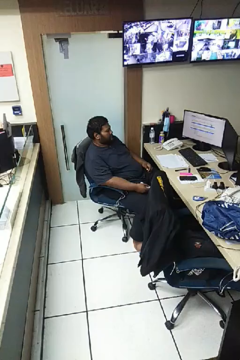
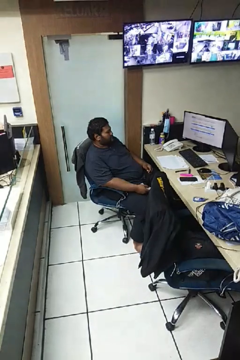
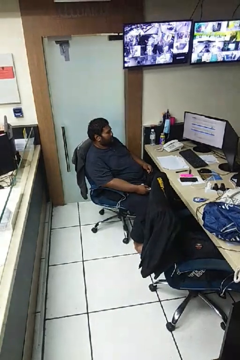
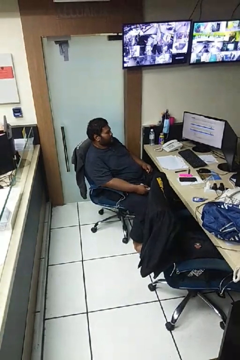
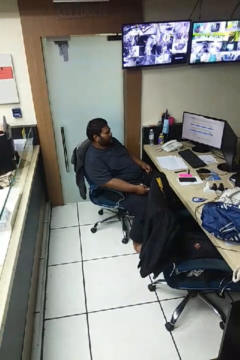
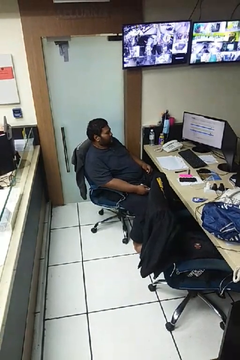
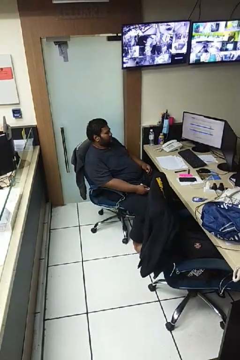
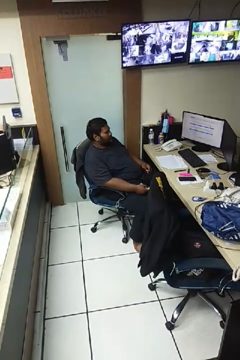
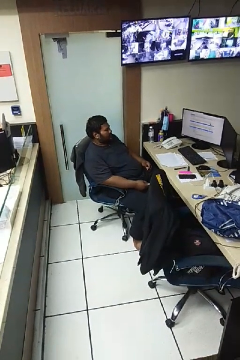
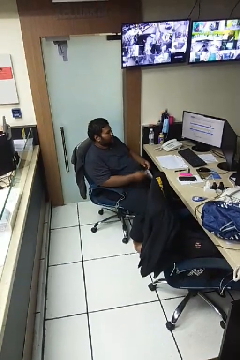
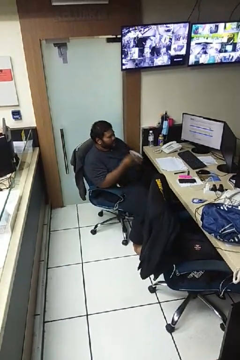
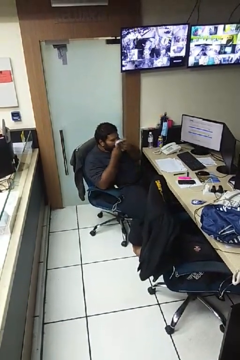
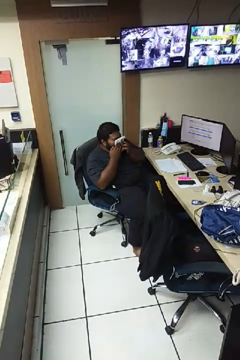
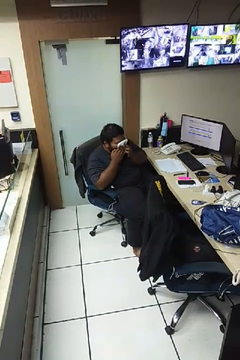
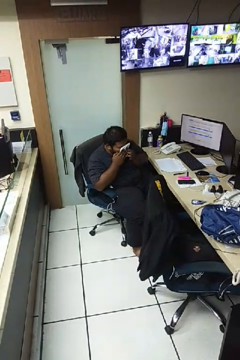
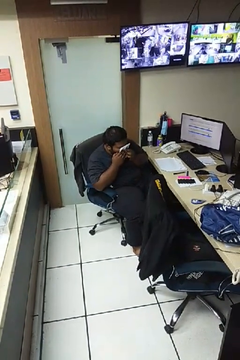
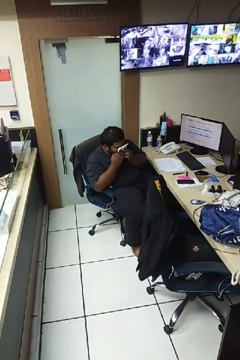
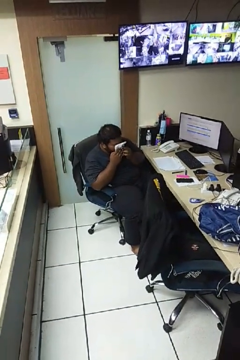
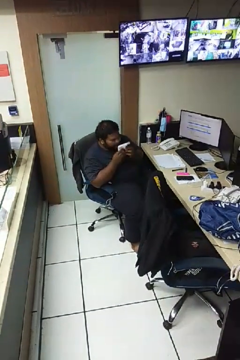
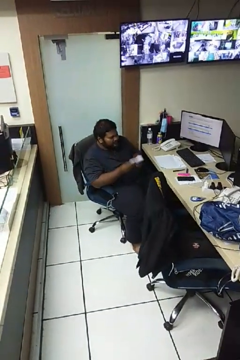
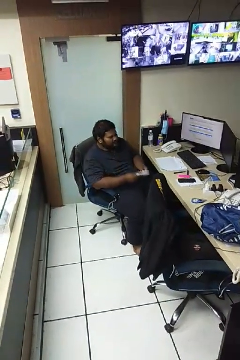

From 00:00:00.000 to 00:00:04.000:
person blows nose

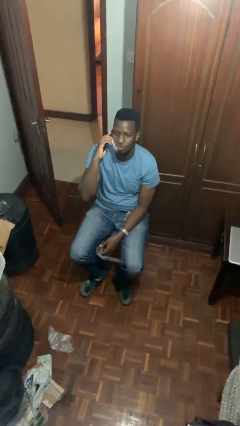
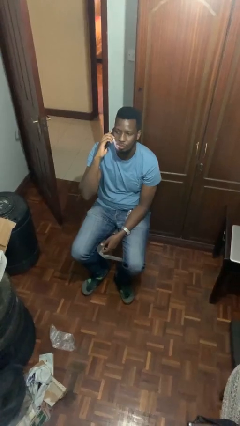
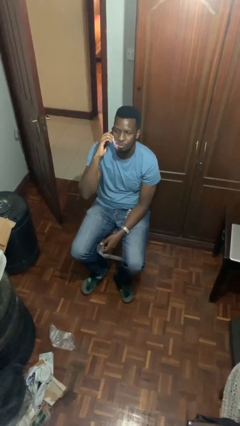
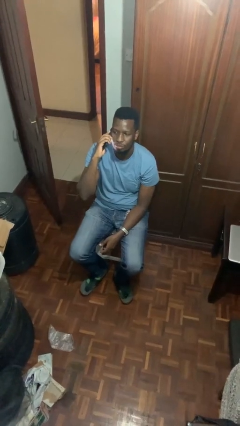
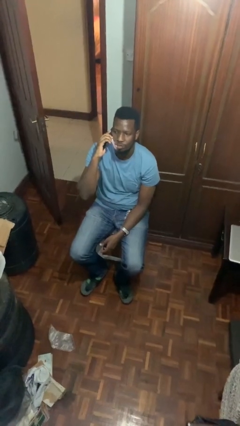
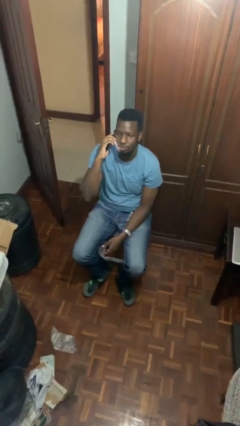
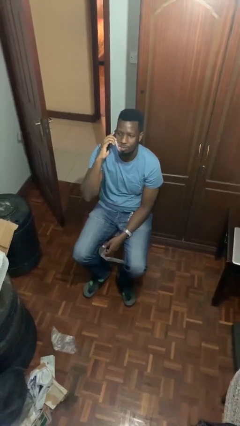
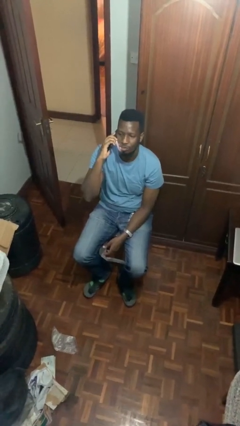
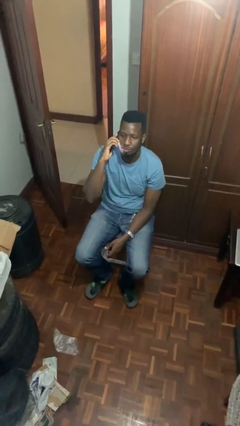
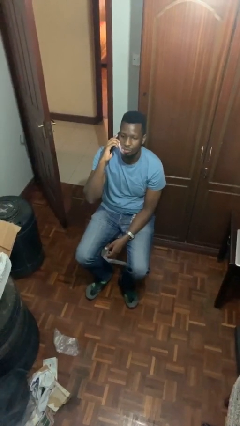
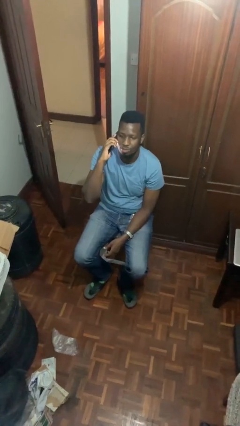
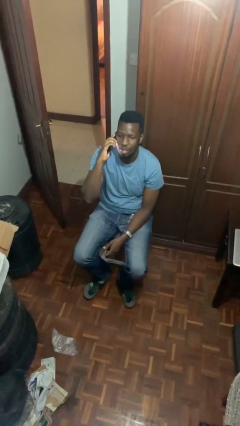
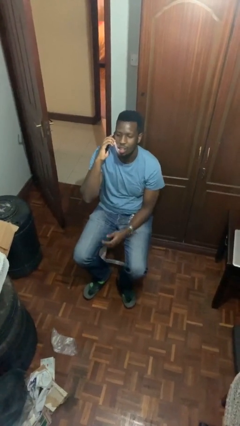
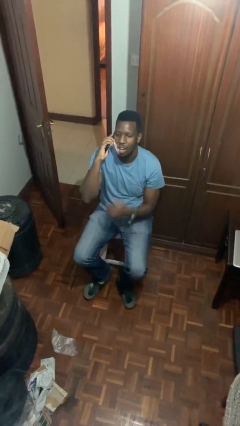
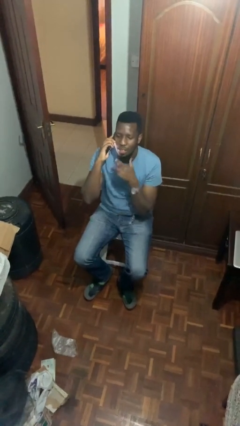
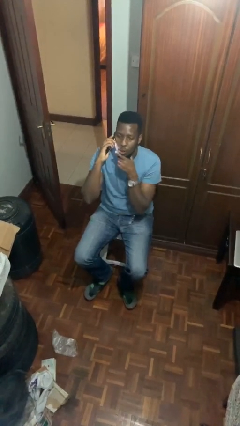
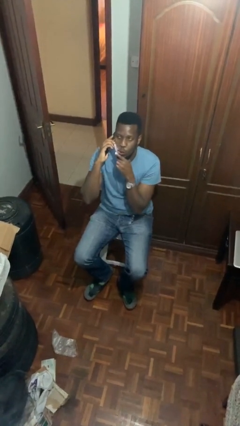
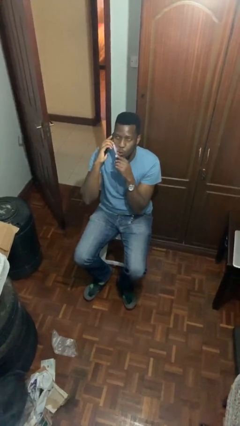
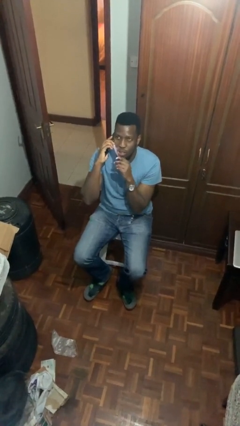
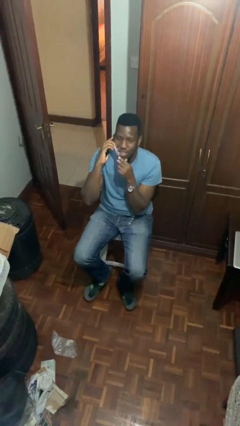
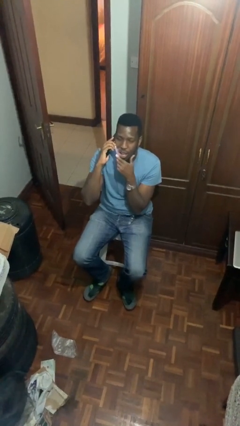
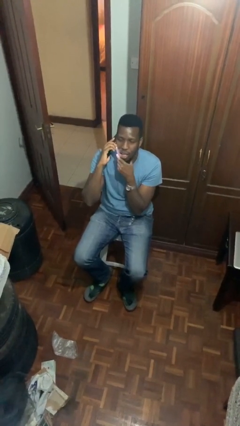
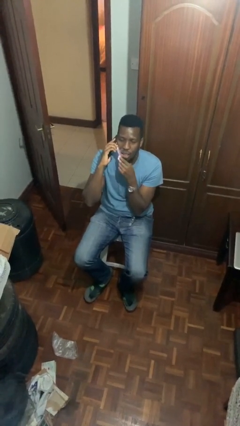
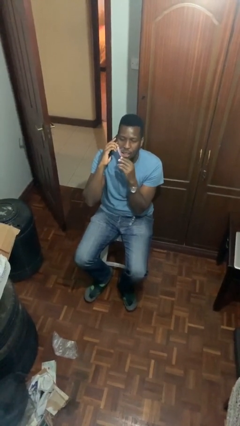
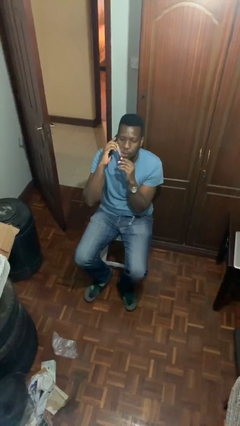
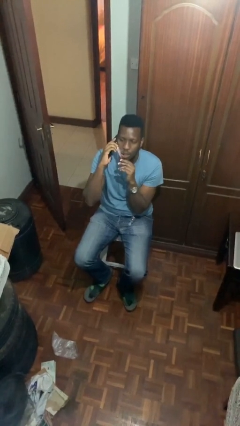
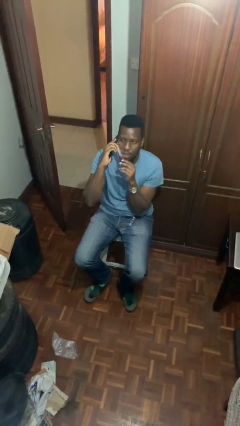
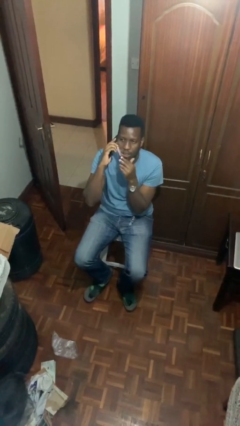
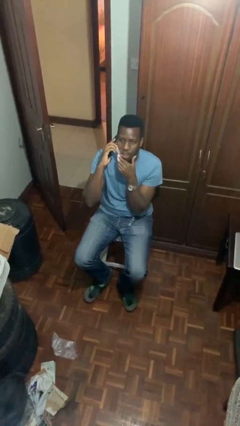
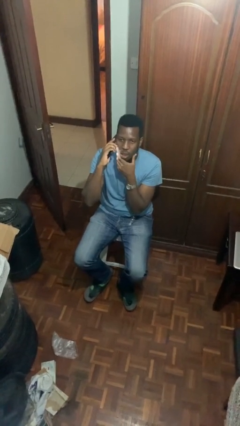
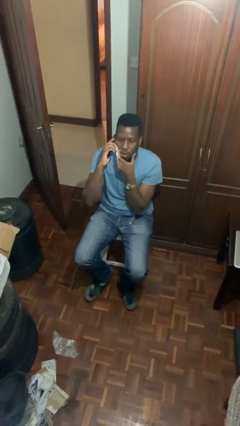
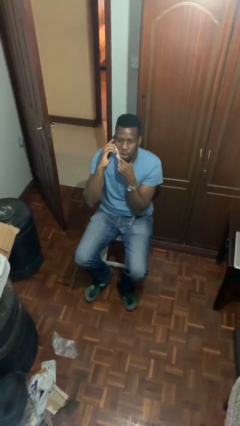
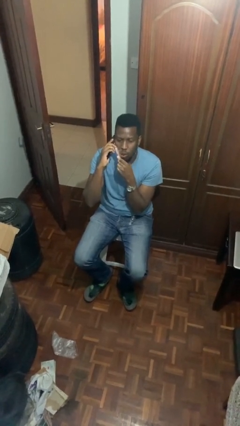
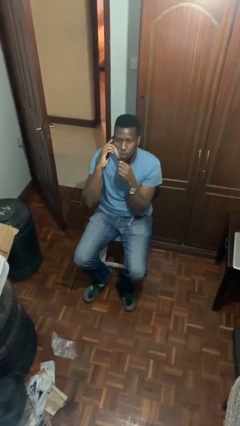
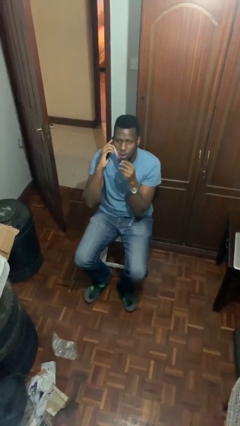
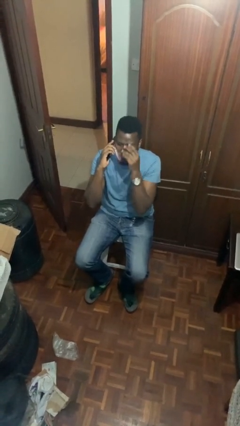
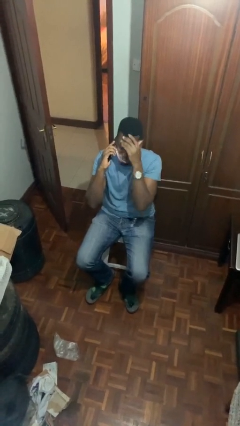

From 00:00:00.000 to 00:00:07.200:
person talks on phone

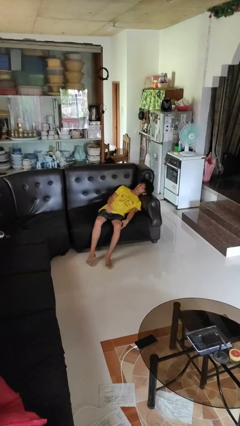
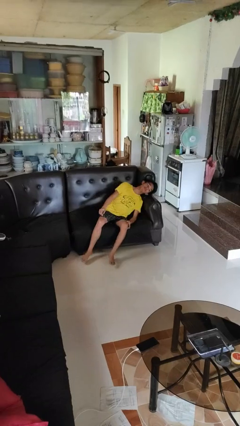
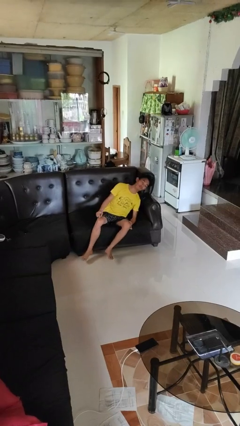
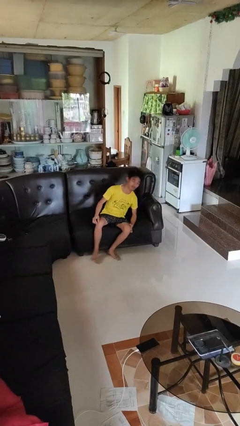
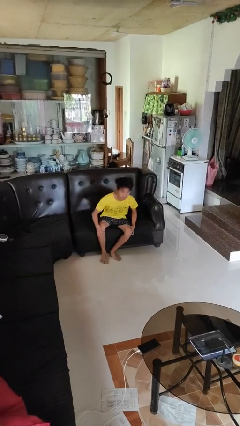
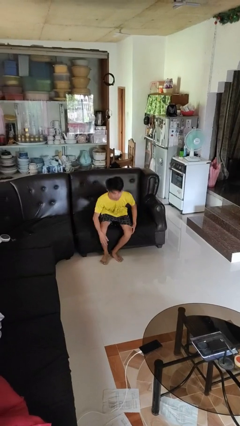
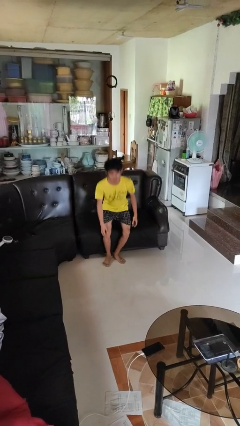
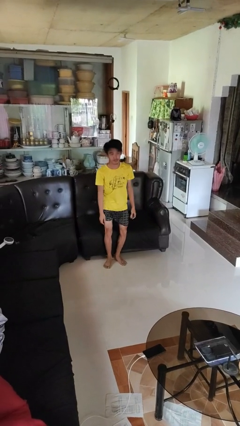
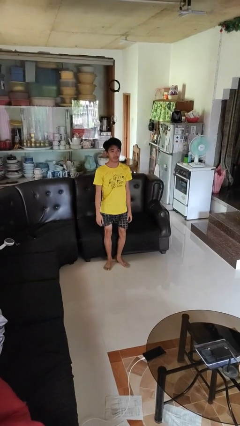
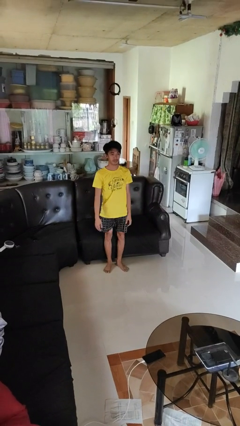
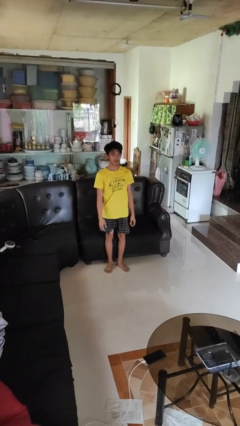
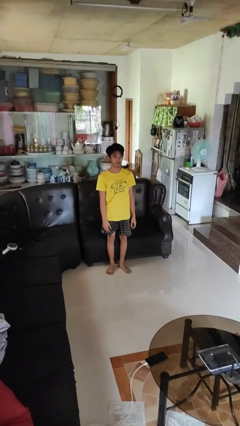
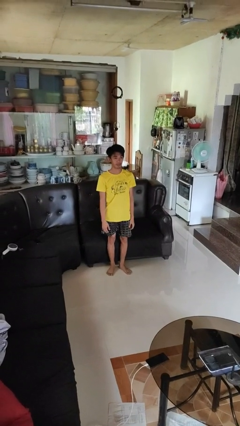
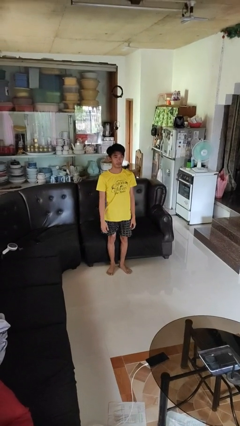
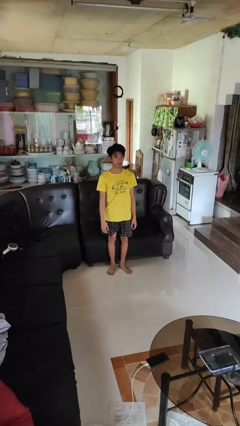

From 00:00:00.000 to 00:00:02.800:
person stands up

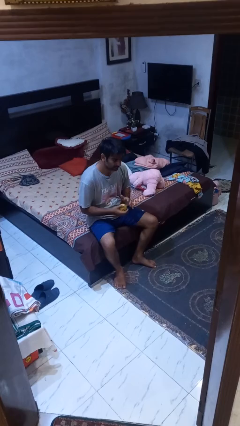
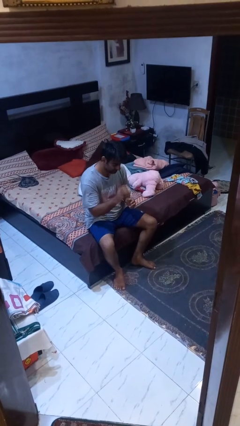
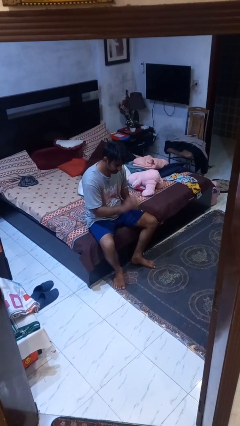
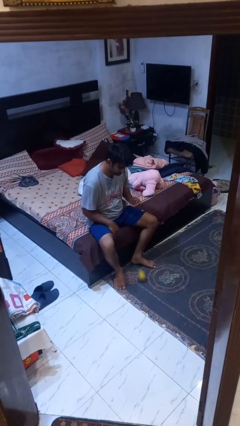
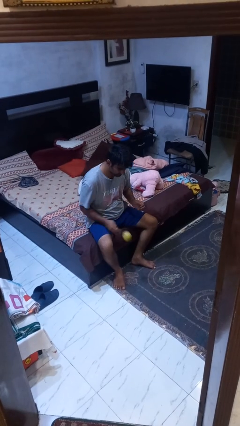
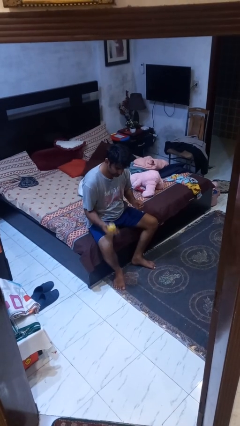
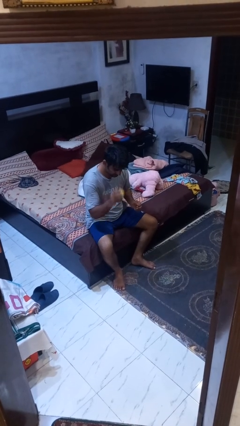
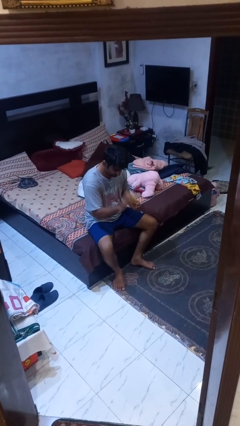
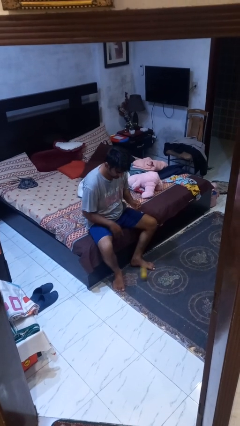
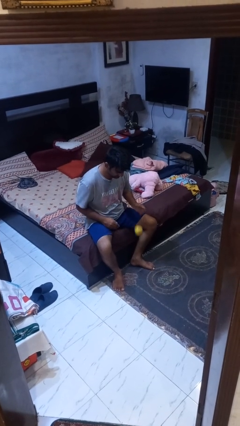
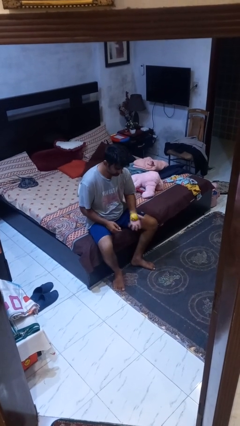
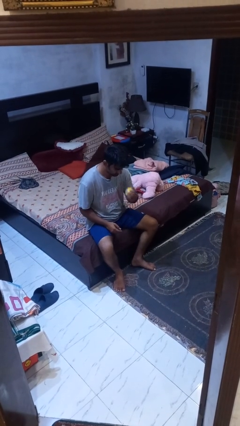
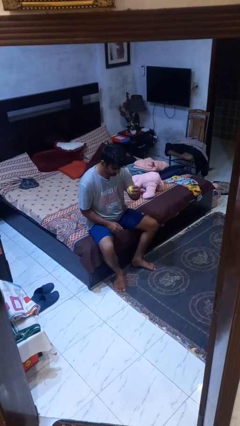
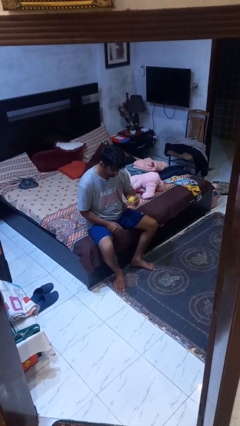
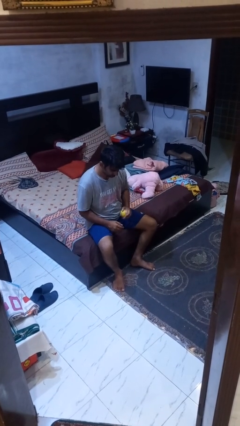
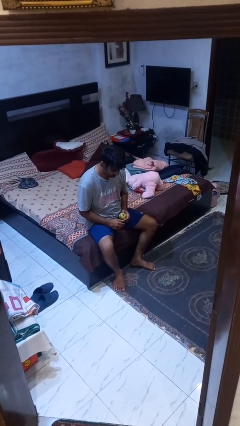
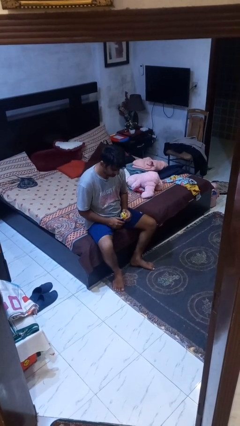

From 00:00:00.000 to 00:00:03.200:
person bounces ball on floor

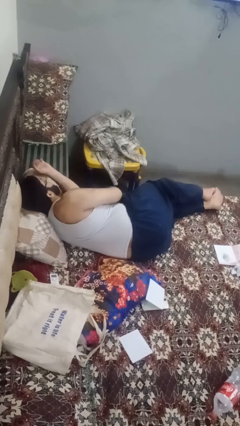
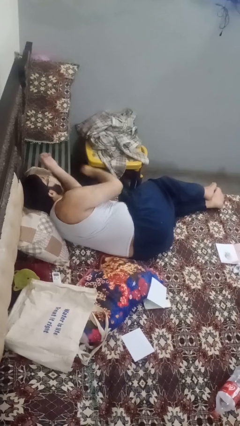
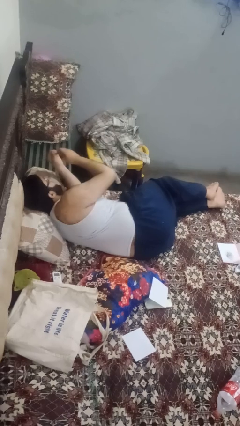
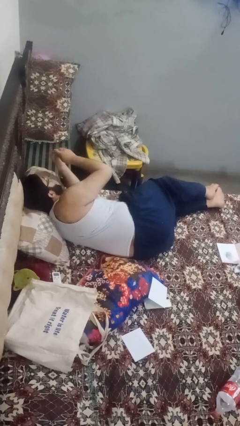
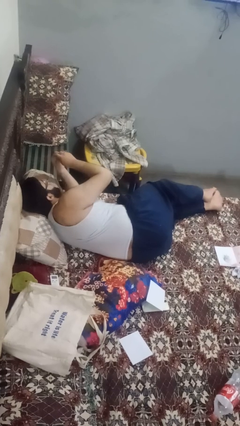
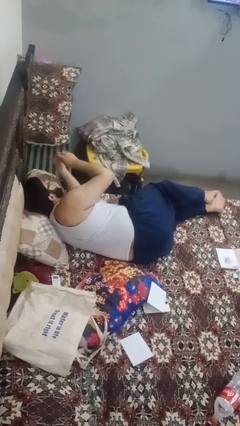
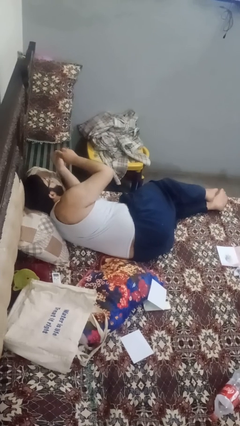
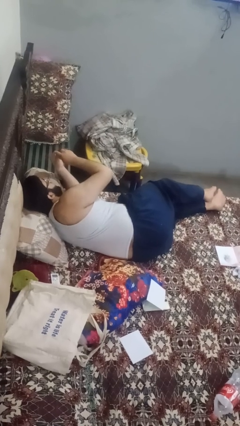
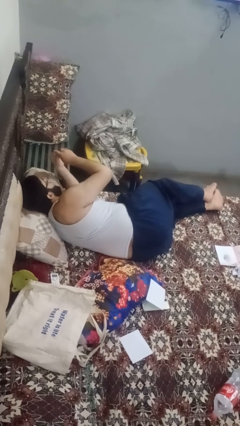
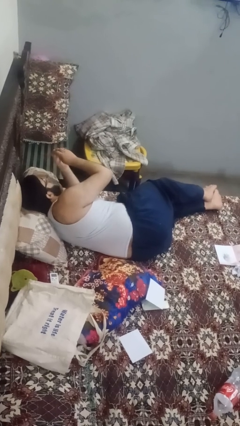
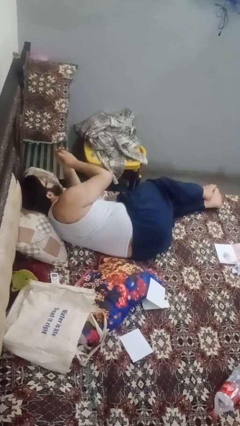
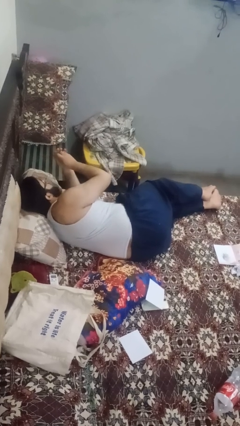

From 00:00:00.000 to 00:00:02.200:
person files fingernails
